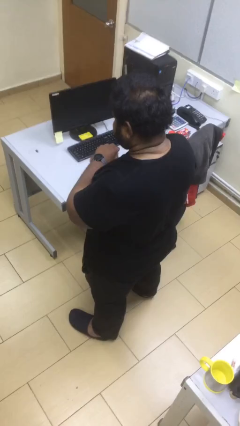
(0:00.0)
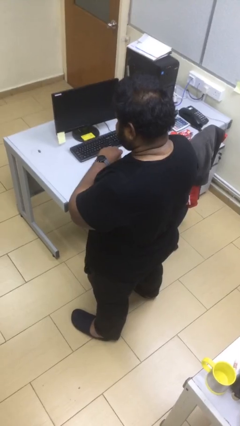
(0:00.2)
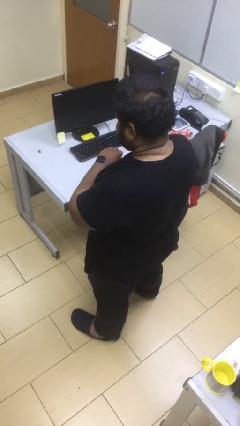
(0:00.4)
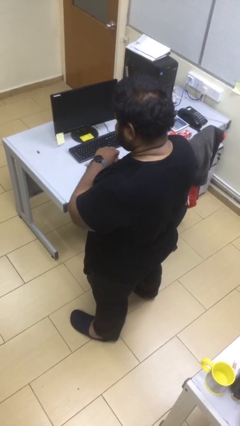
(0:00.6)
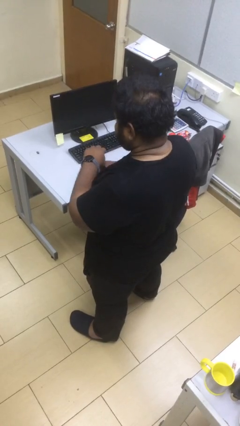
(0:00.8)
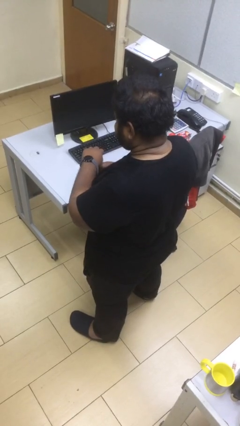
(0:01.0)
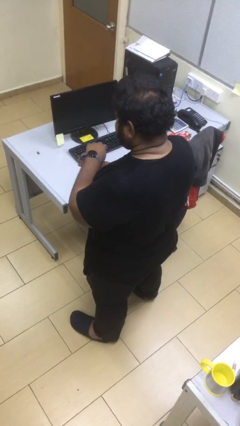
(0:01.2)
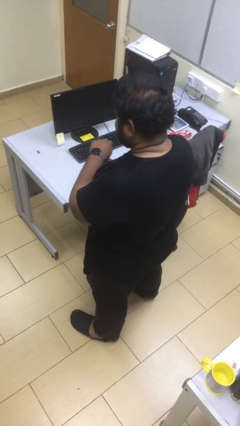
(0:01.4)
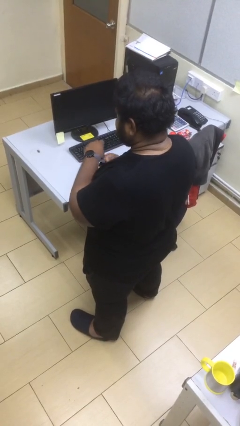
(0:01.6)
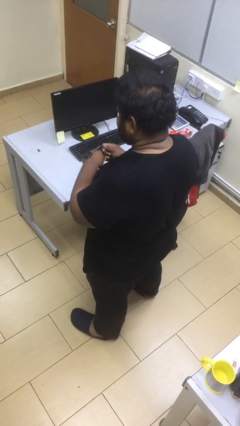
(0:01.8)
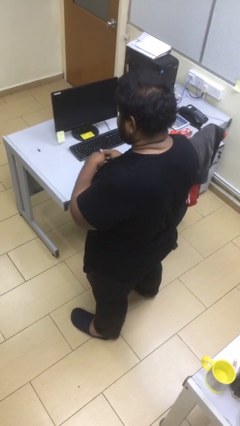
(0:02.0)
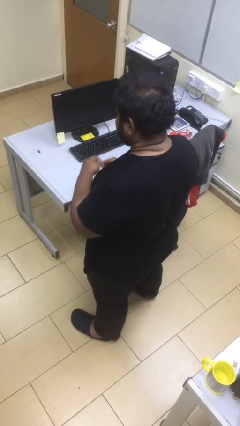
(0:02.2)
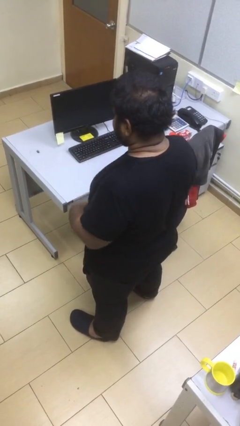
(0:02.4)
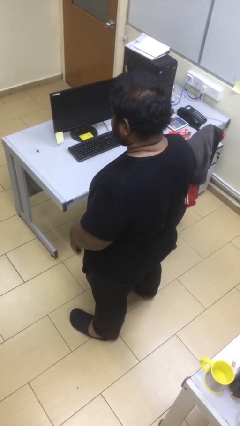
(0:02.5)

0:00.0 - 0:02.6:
person takes off wristwatch

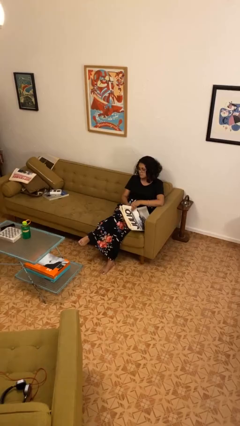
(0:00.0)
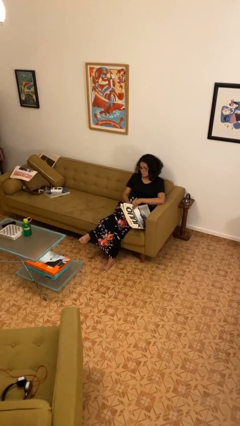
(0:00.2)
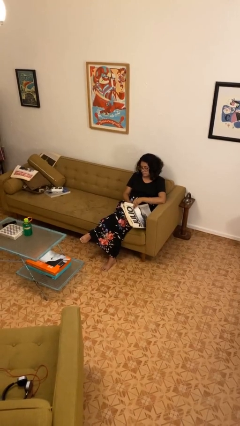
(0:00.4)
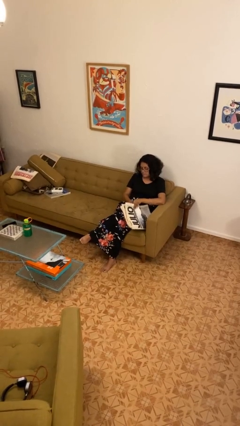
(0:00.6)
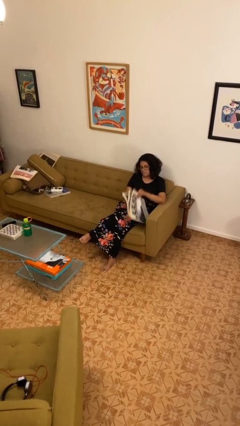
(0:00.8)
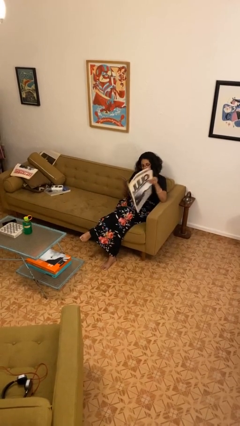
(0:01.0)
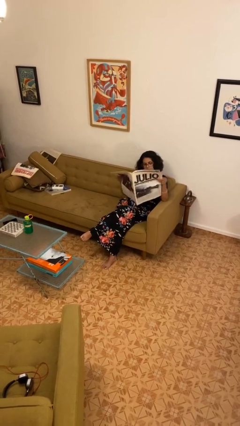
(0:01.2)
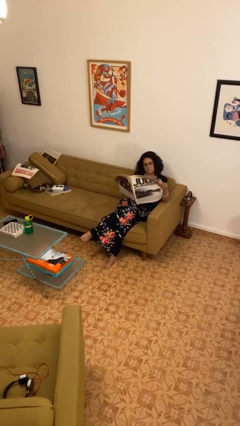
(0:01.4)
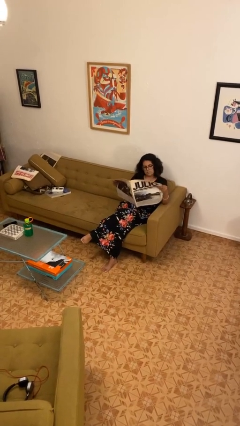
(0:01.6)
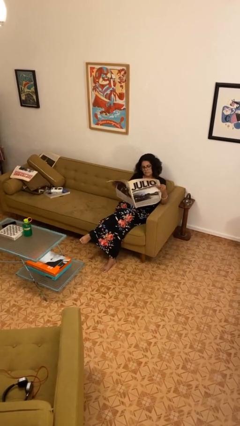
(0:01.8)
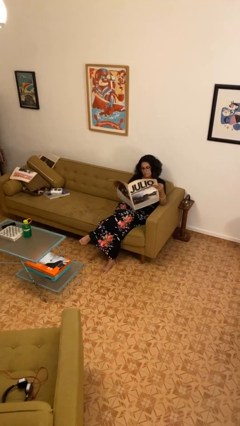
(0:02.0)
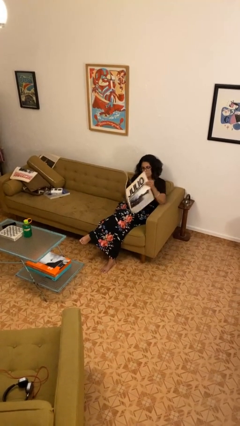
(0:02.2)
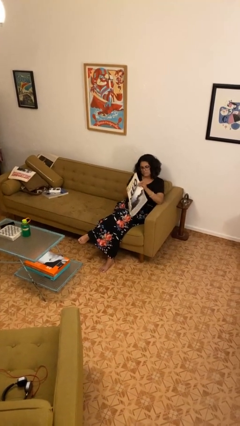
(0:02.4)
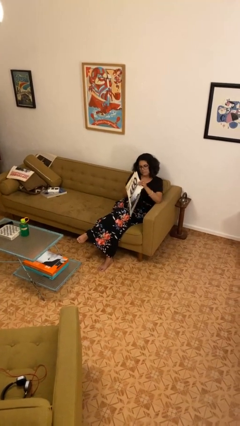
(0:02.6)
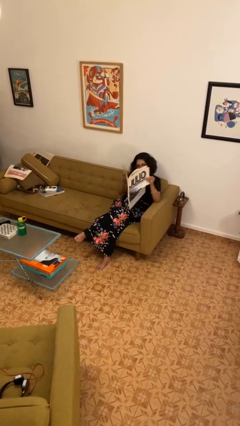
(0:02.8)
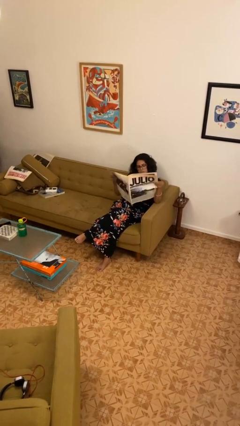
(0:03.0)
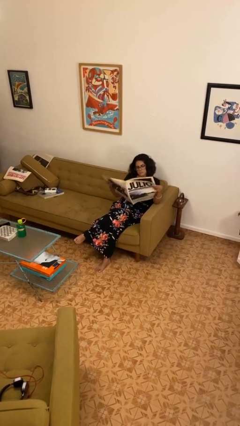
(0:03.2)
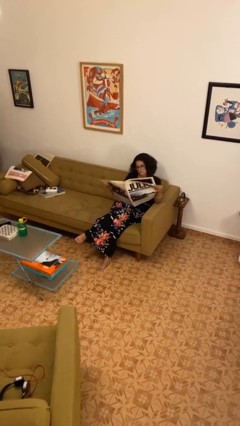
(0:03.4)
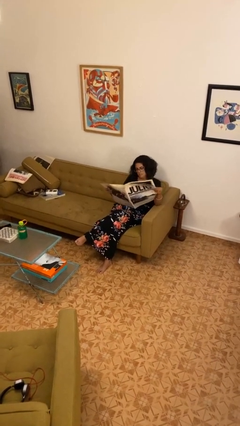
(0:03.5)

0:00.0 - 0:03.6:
person reads newspaper

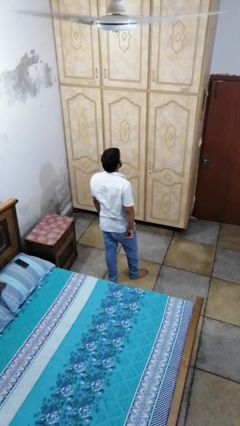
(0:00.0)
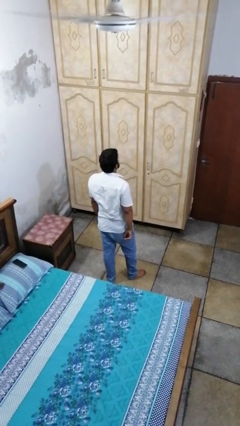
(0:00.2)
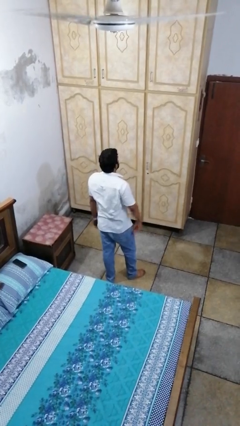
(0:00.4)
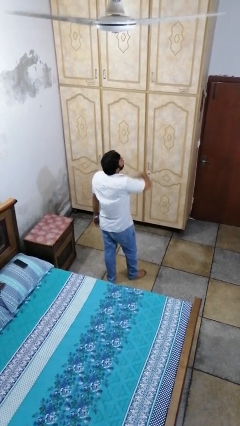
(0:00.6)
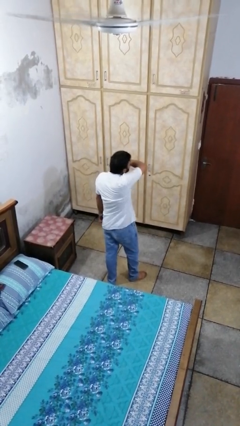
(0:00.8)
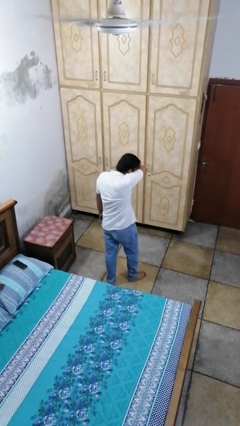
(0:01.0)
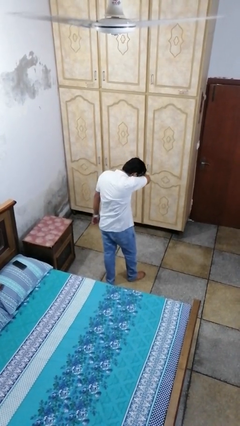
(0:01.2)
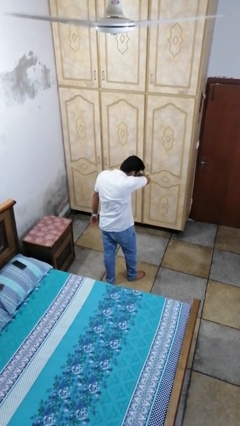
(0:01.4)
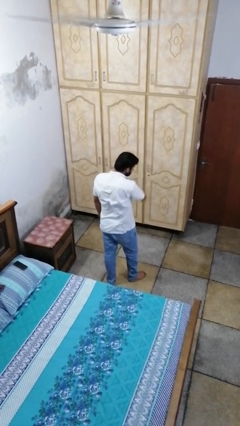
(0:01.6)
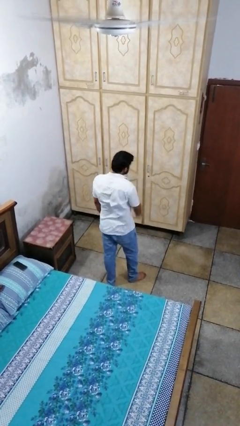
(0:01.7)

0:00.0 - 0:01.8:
person sneezes into arm

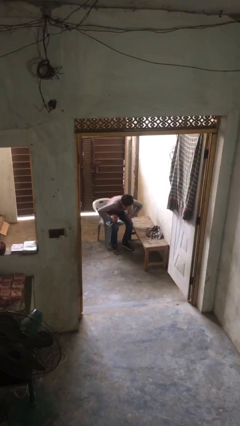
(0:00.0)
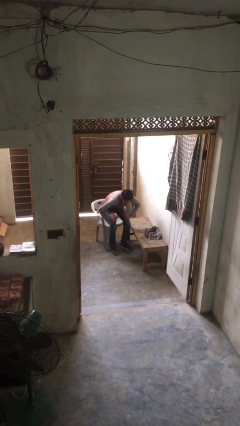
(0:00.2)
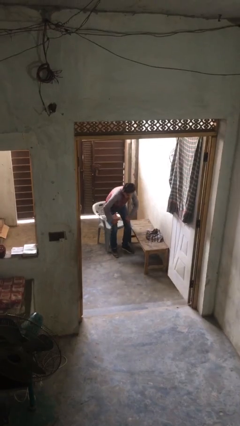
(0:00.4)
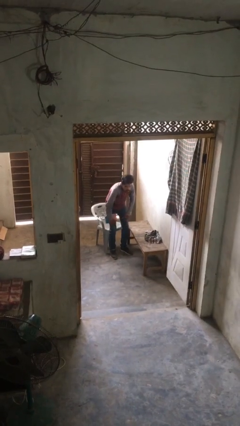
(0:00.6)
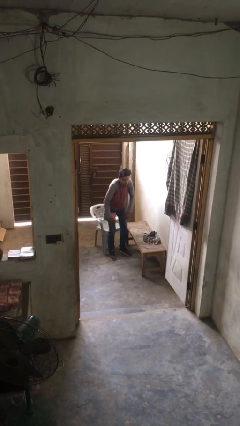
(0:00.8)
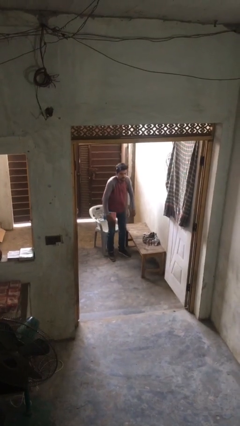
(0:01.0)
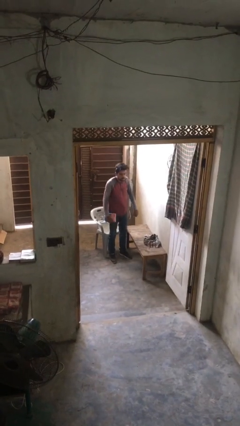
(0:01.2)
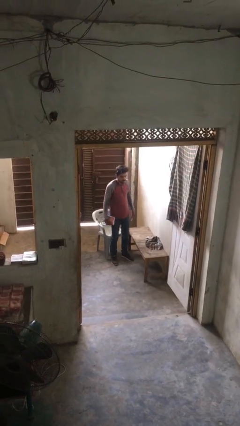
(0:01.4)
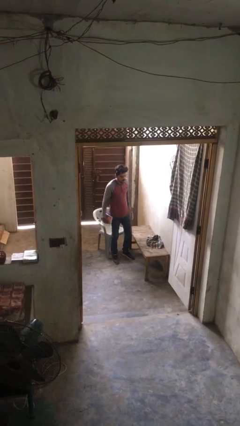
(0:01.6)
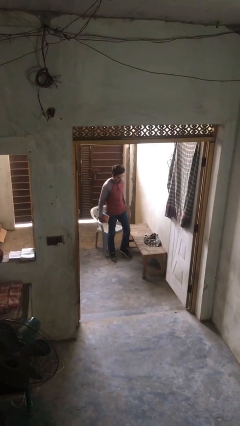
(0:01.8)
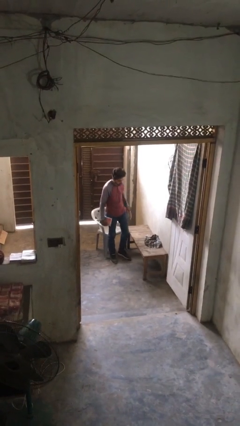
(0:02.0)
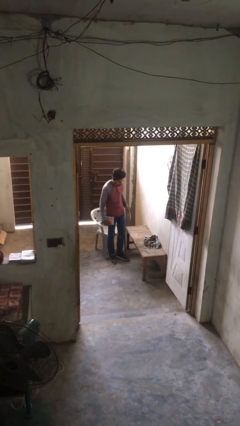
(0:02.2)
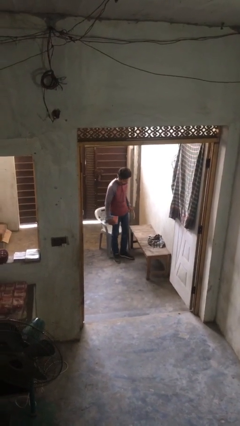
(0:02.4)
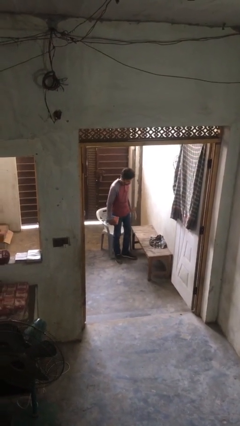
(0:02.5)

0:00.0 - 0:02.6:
person stands up

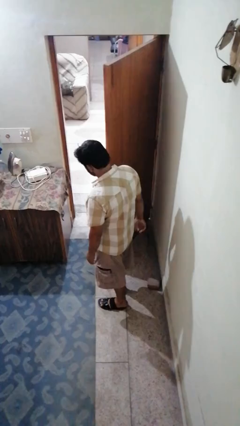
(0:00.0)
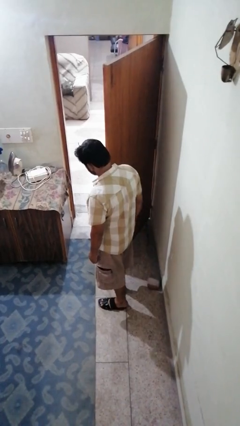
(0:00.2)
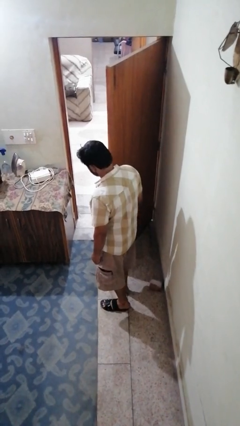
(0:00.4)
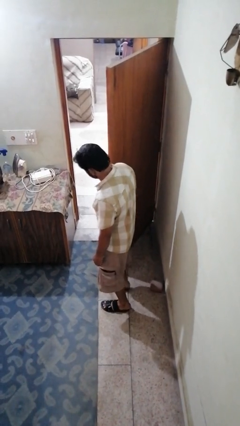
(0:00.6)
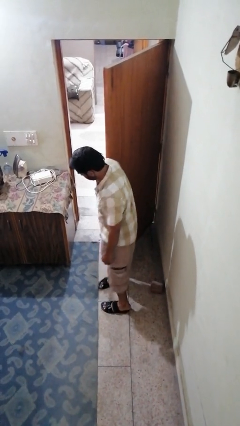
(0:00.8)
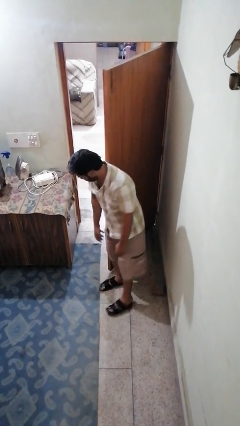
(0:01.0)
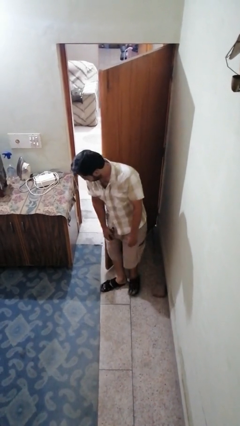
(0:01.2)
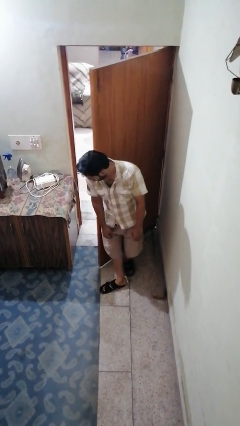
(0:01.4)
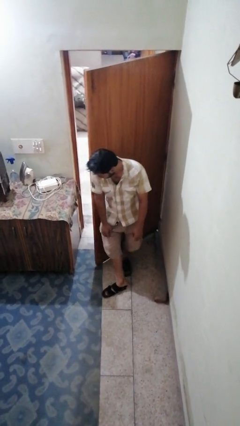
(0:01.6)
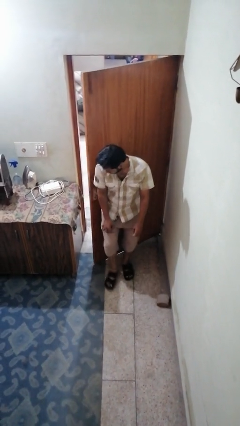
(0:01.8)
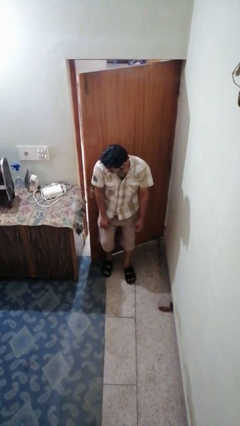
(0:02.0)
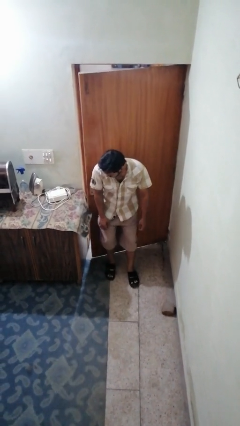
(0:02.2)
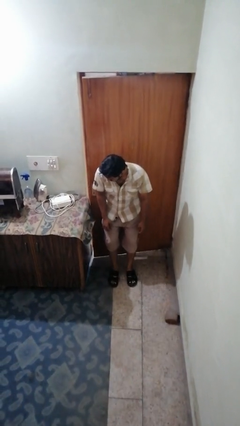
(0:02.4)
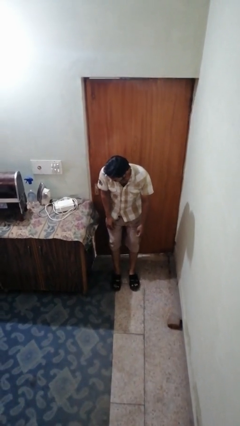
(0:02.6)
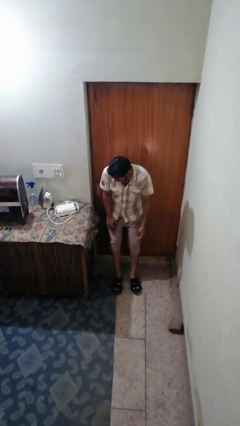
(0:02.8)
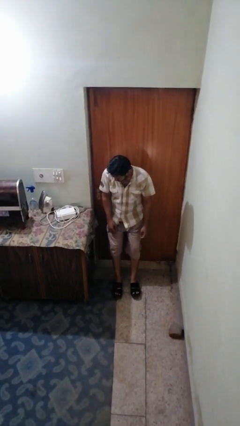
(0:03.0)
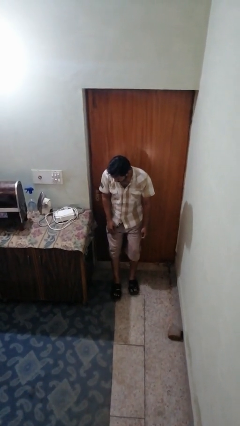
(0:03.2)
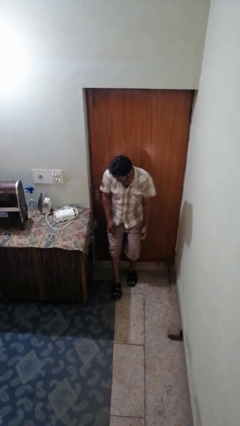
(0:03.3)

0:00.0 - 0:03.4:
person closes door with hip

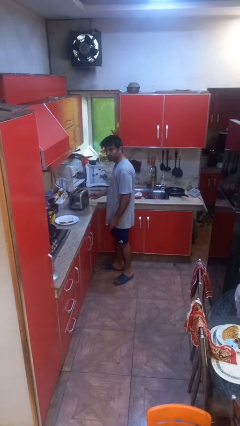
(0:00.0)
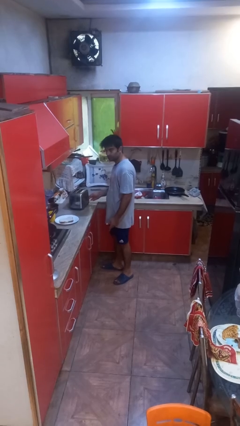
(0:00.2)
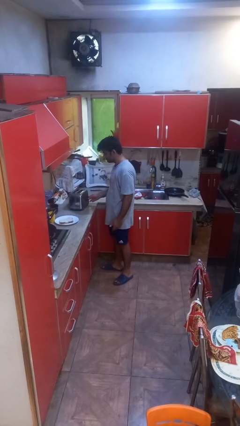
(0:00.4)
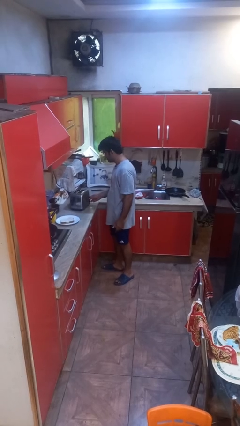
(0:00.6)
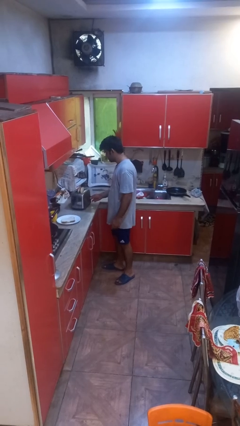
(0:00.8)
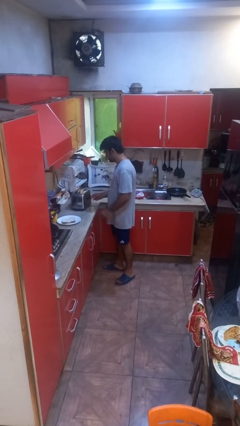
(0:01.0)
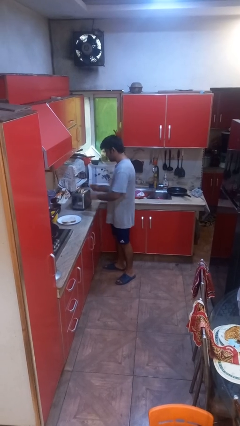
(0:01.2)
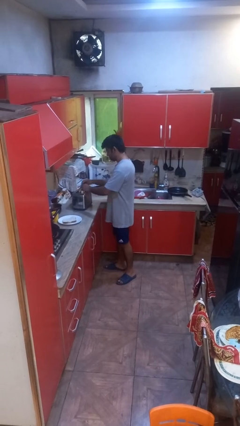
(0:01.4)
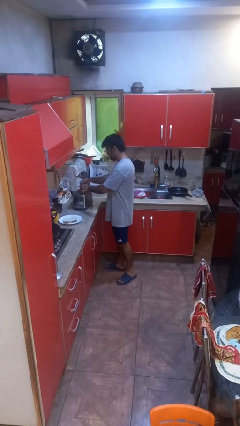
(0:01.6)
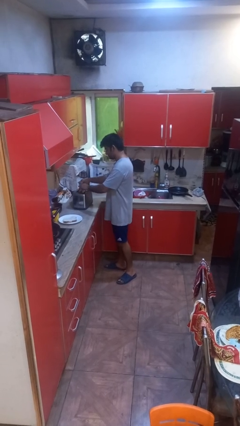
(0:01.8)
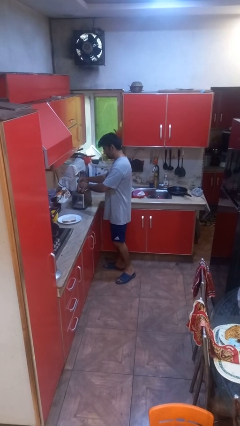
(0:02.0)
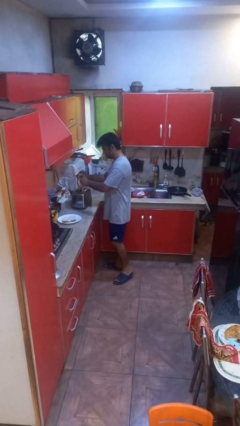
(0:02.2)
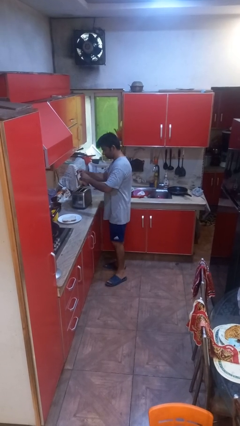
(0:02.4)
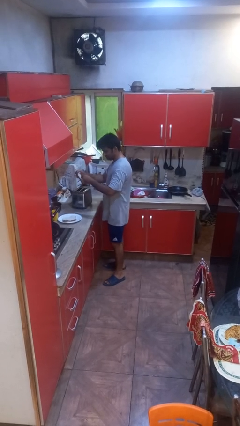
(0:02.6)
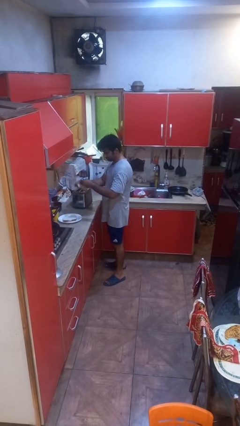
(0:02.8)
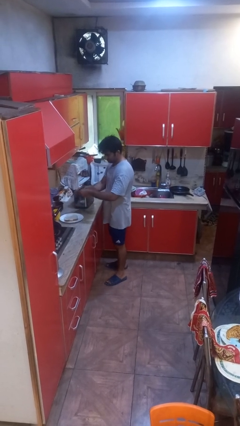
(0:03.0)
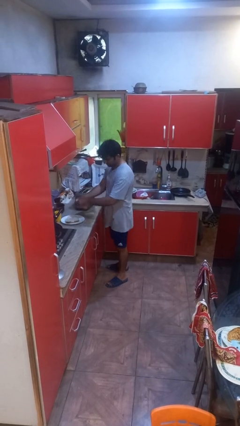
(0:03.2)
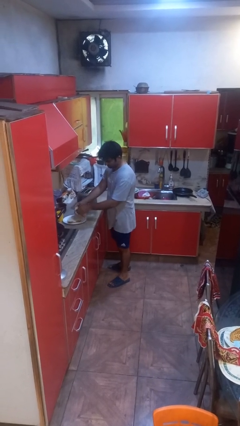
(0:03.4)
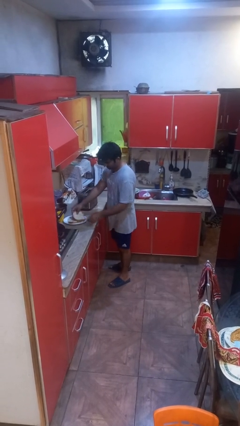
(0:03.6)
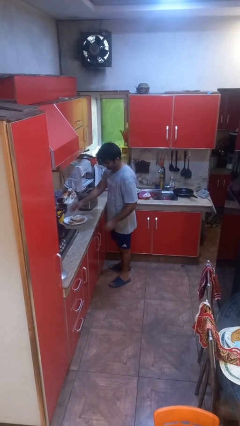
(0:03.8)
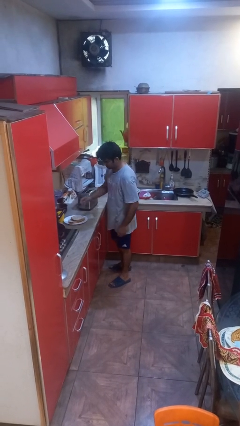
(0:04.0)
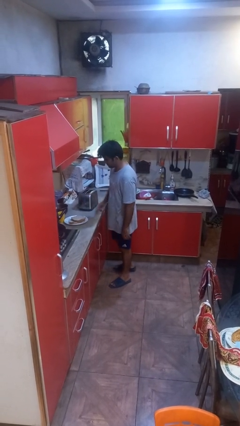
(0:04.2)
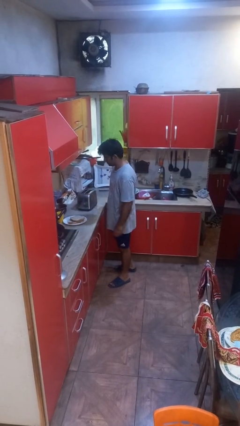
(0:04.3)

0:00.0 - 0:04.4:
person takes object from toaster
